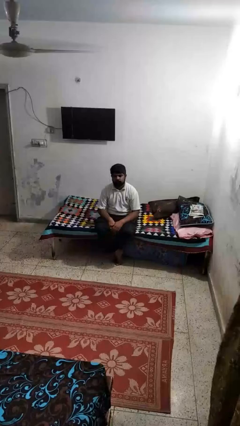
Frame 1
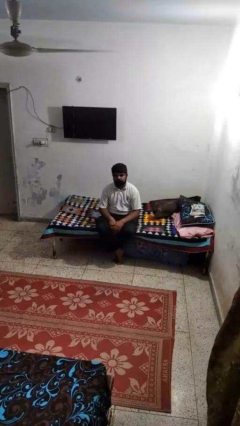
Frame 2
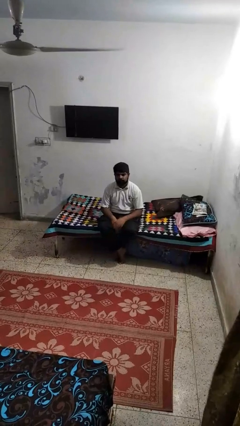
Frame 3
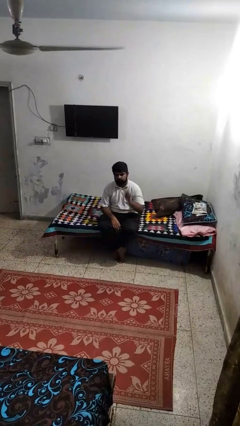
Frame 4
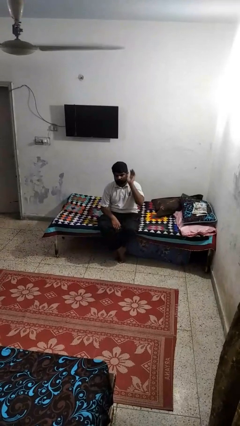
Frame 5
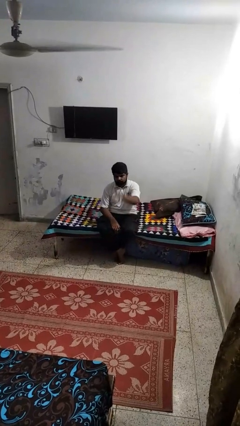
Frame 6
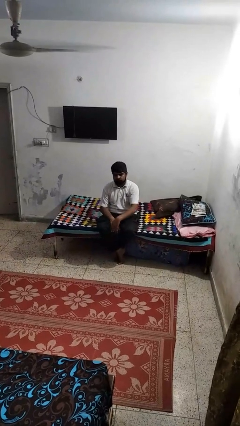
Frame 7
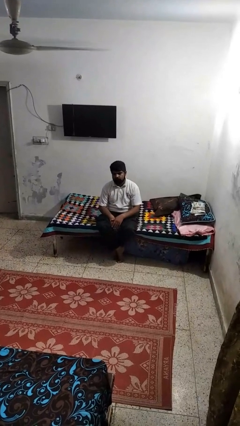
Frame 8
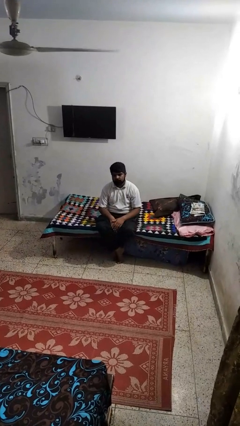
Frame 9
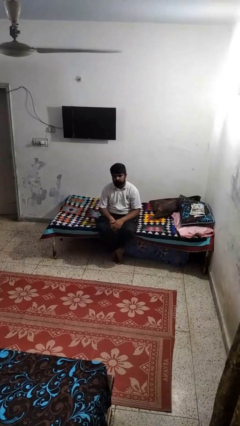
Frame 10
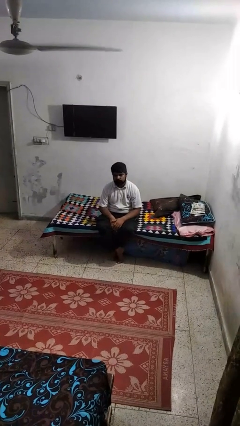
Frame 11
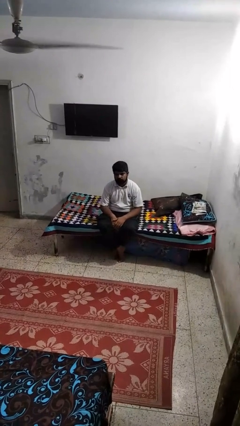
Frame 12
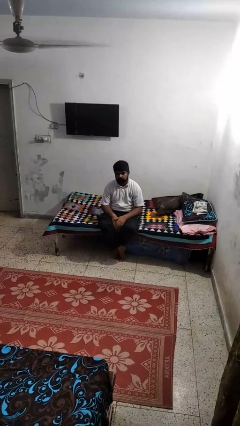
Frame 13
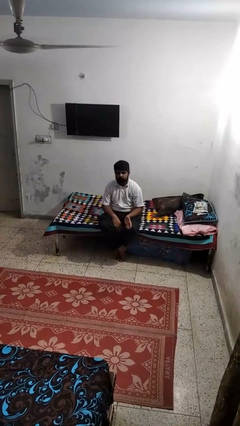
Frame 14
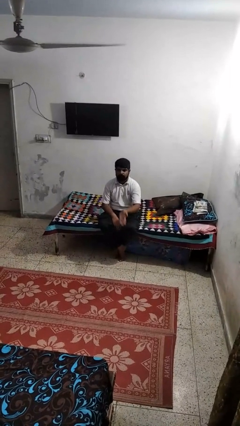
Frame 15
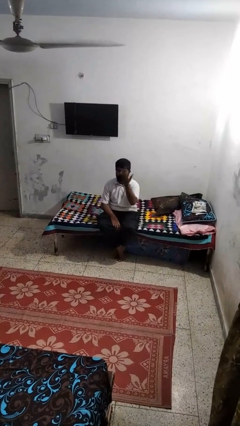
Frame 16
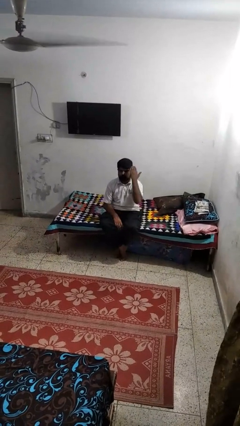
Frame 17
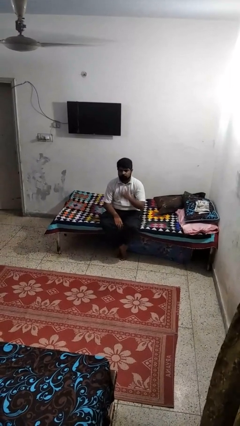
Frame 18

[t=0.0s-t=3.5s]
person gestures swipe down

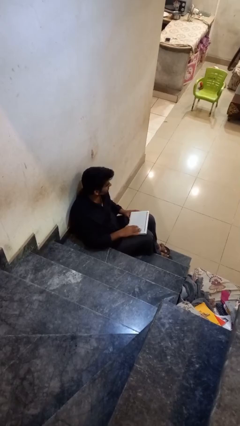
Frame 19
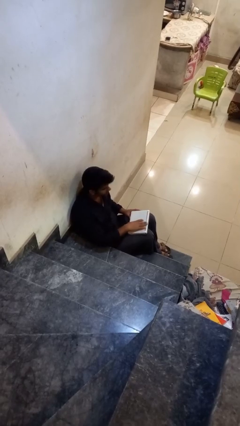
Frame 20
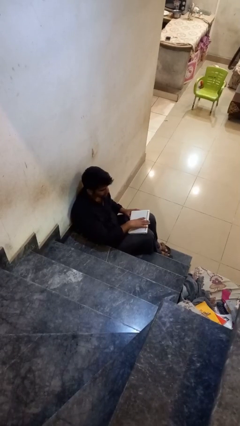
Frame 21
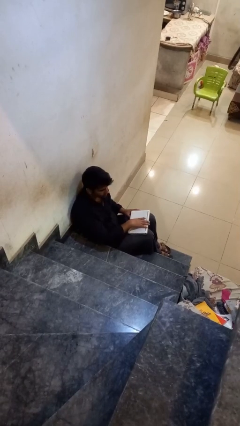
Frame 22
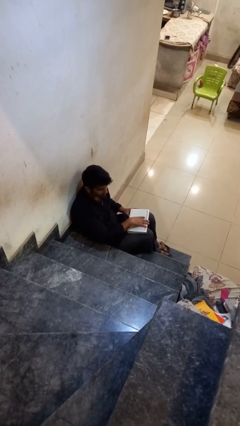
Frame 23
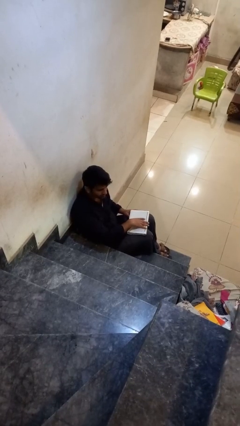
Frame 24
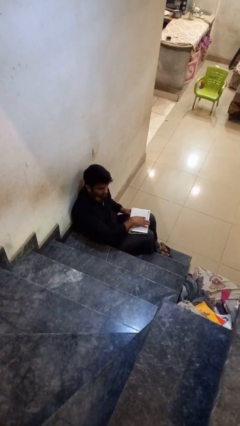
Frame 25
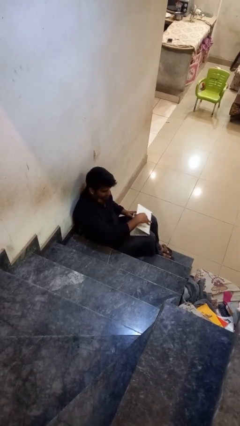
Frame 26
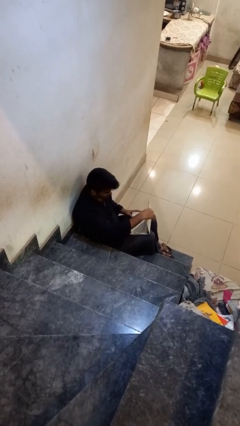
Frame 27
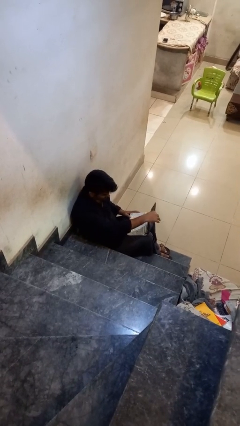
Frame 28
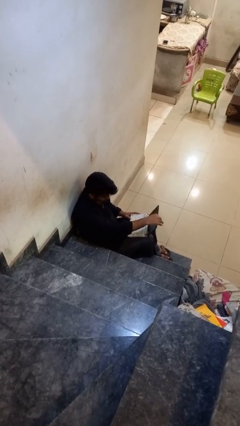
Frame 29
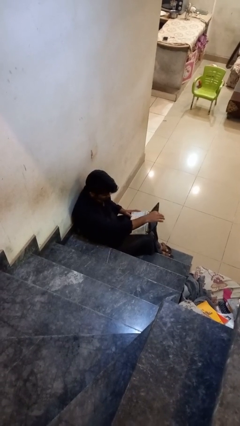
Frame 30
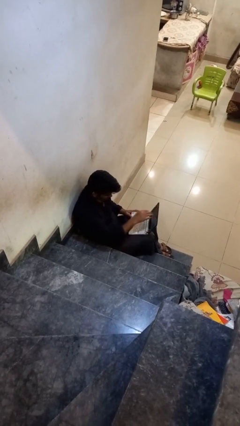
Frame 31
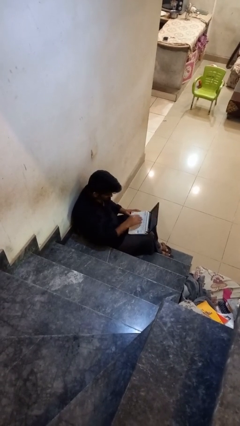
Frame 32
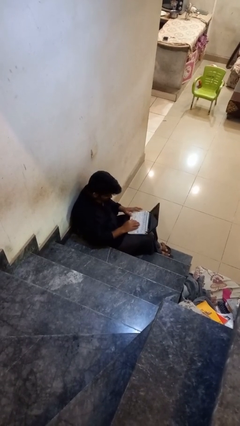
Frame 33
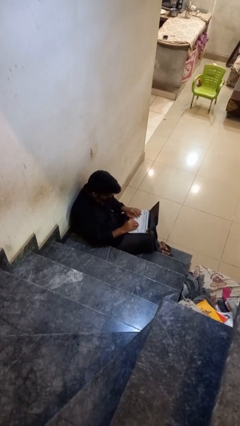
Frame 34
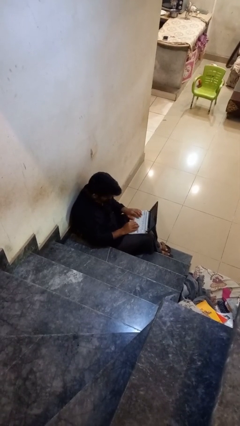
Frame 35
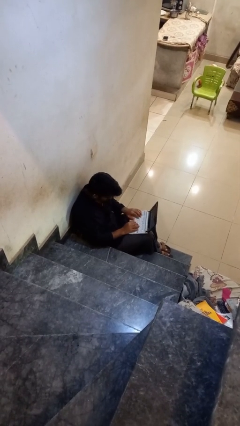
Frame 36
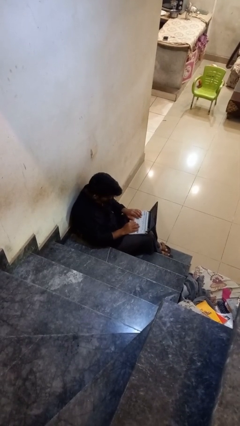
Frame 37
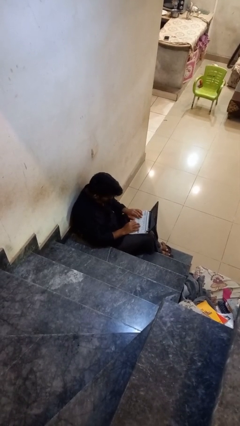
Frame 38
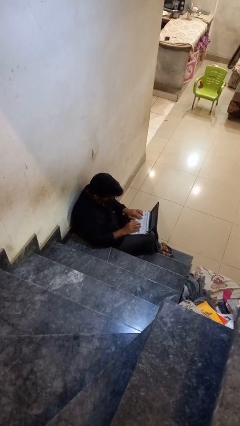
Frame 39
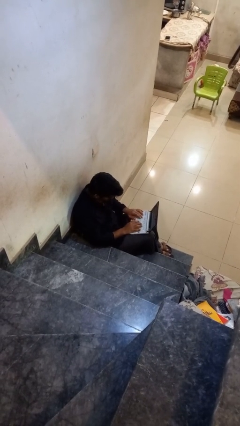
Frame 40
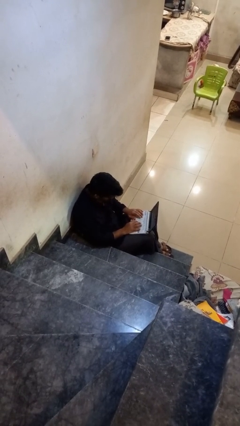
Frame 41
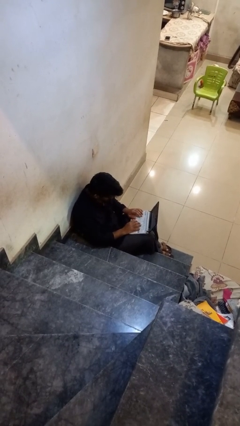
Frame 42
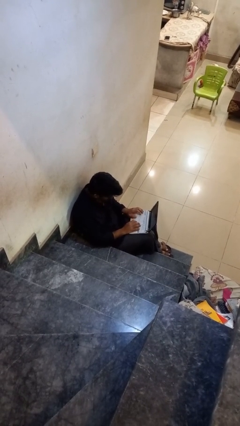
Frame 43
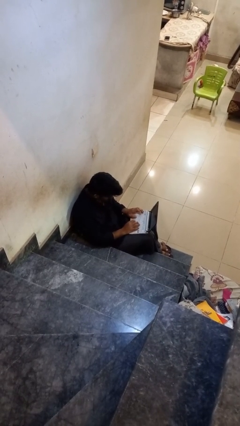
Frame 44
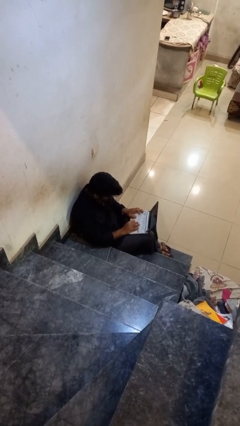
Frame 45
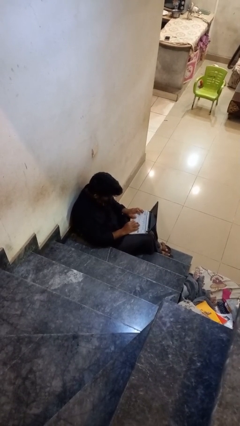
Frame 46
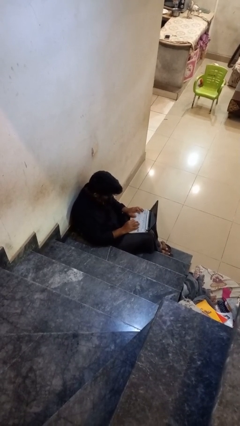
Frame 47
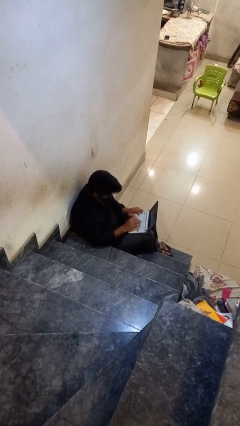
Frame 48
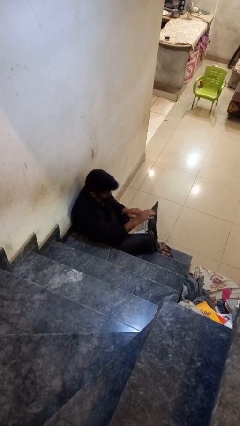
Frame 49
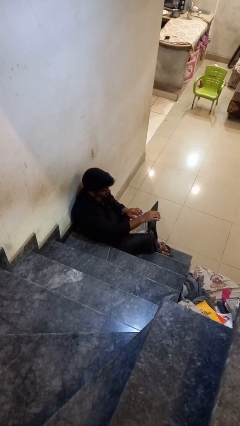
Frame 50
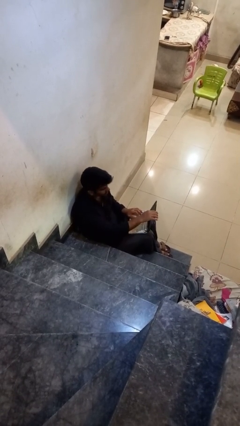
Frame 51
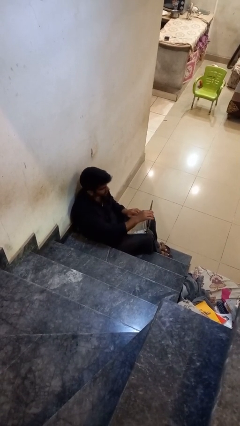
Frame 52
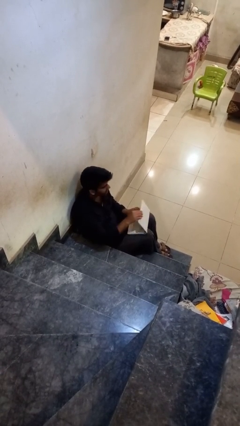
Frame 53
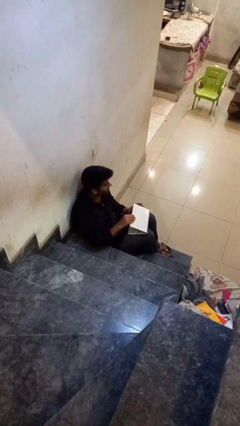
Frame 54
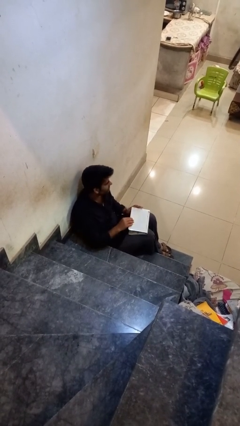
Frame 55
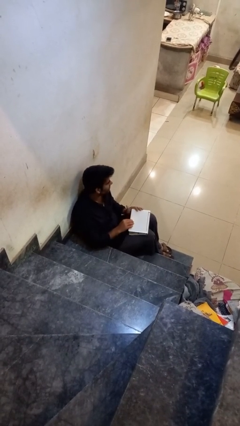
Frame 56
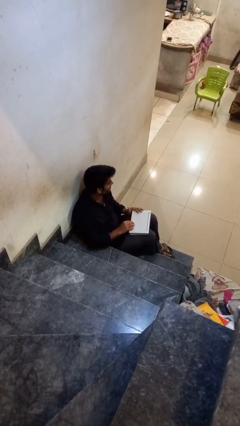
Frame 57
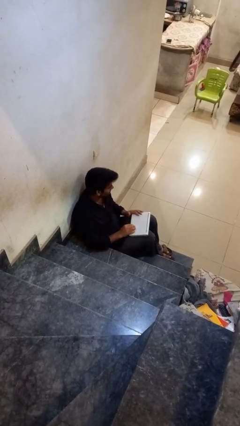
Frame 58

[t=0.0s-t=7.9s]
person interacts with laptop

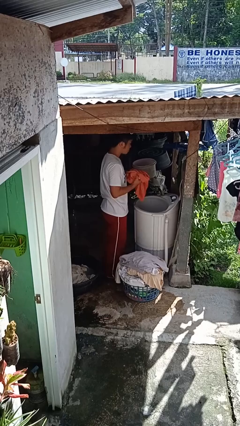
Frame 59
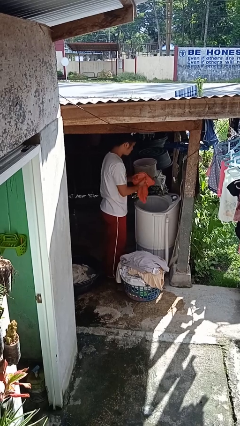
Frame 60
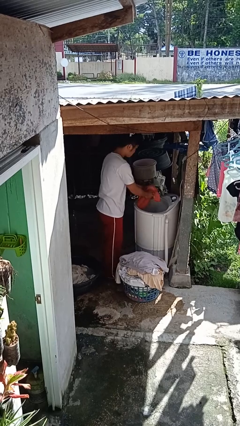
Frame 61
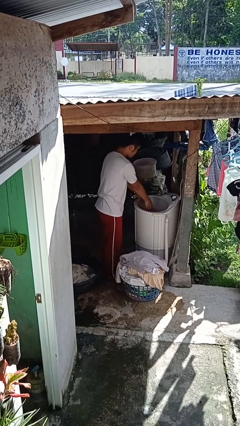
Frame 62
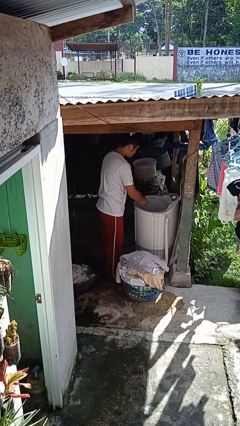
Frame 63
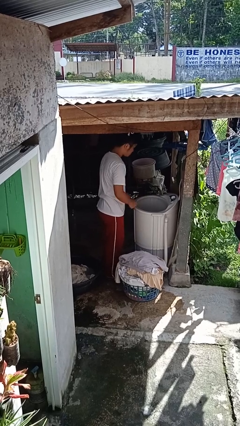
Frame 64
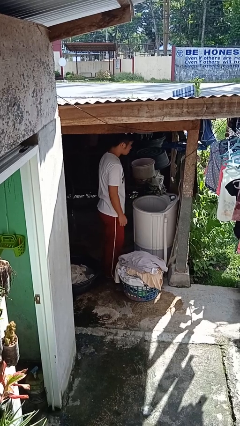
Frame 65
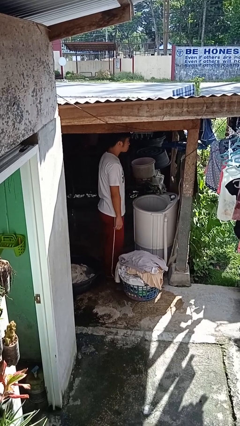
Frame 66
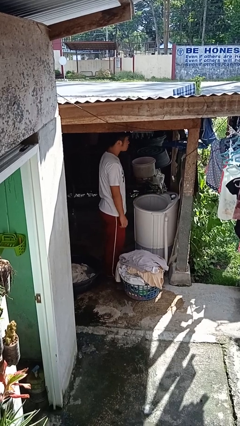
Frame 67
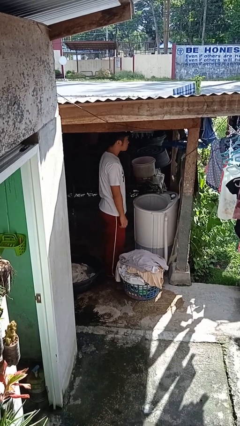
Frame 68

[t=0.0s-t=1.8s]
person loads clotheswasher

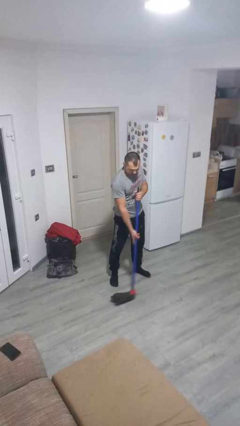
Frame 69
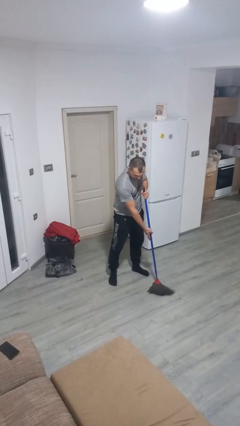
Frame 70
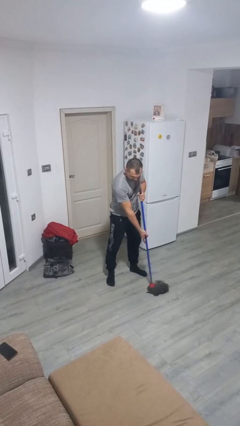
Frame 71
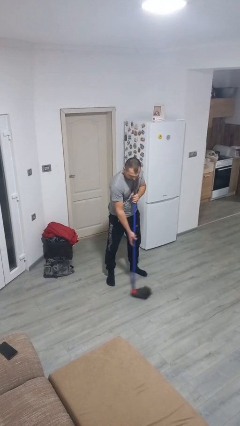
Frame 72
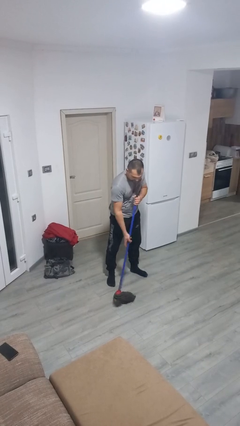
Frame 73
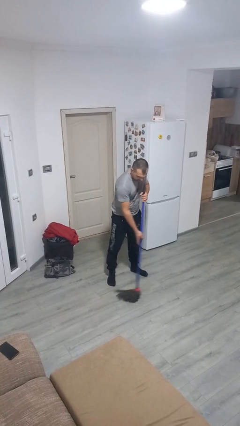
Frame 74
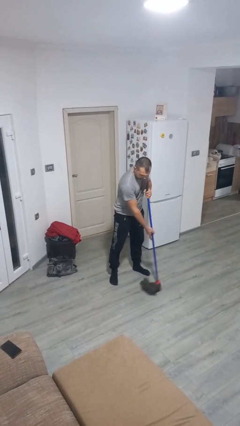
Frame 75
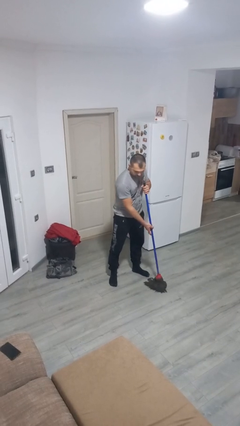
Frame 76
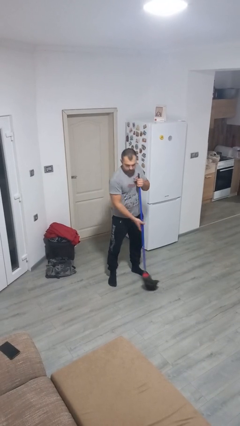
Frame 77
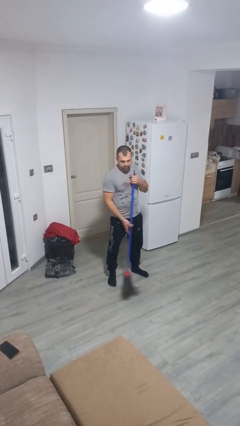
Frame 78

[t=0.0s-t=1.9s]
person mops

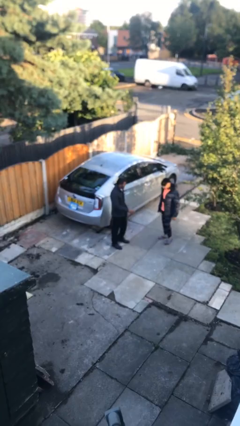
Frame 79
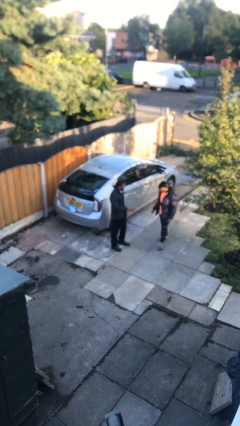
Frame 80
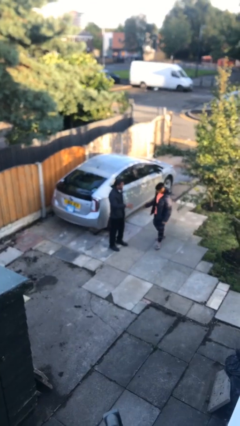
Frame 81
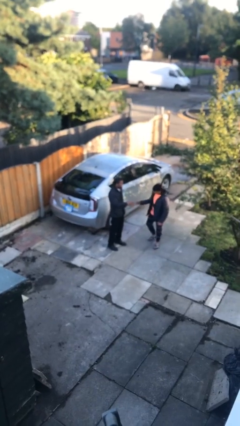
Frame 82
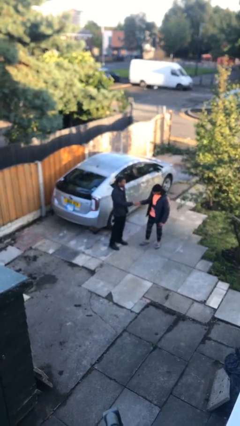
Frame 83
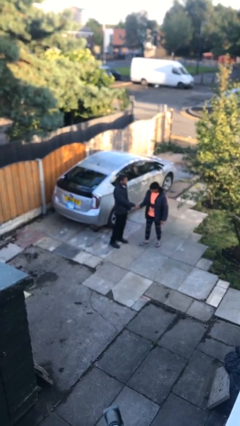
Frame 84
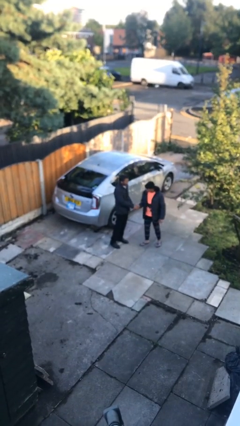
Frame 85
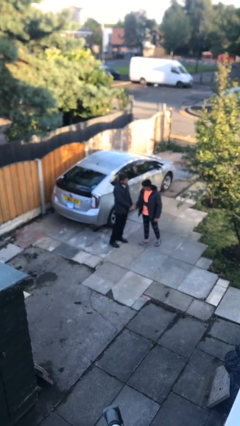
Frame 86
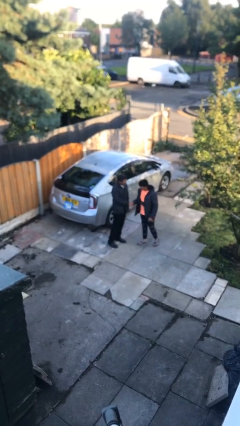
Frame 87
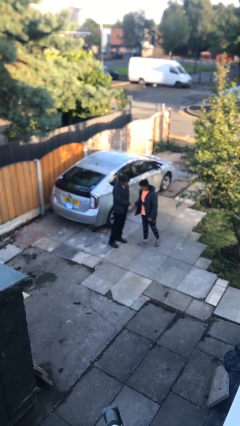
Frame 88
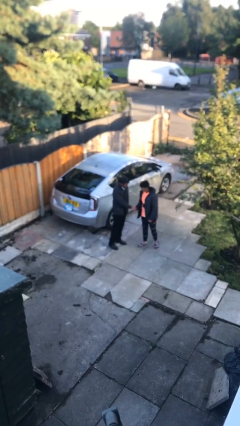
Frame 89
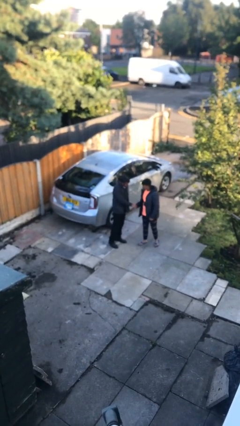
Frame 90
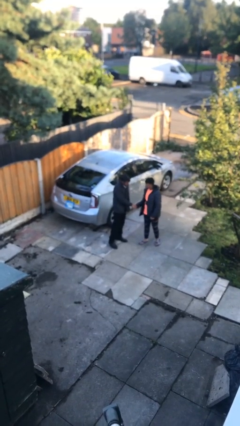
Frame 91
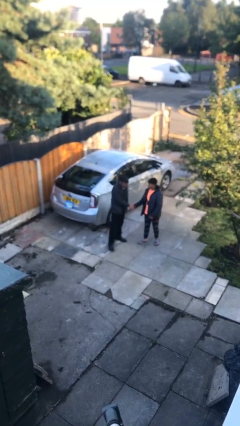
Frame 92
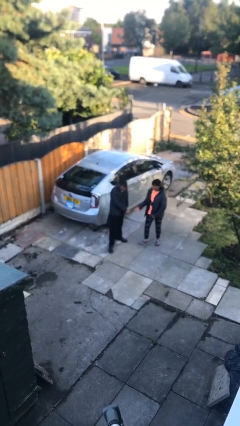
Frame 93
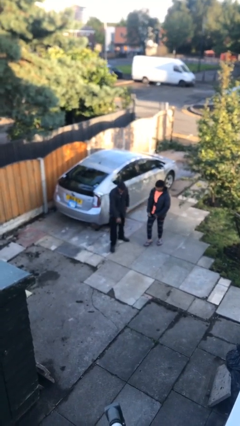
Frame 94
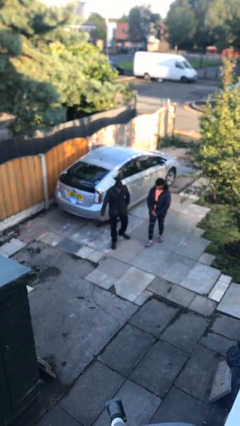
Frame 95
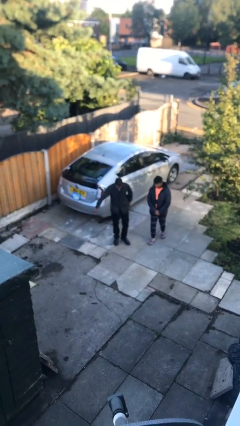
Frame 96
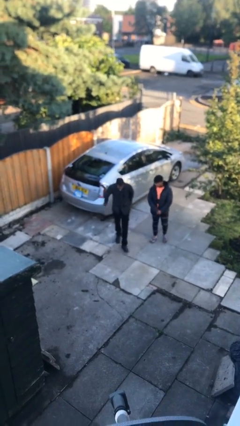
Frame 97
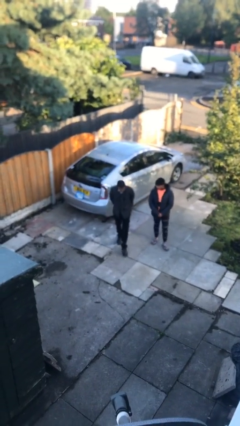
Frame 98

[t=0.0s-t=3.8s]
person shakes hand
